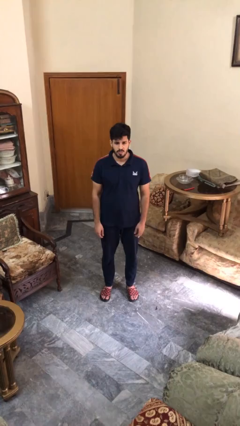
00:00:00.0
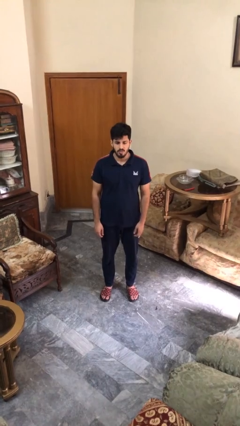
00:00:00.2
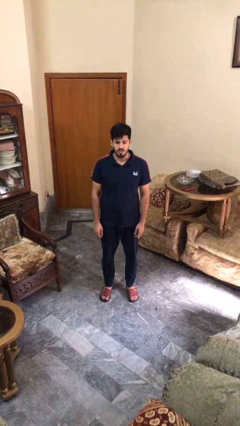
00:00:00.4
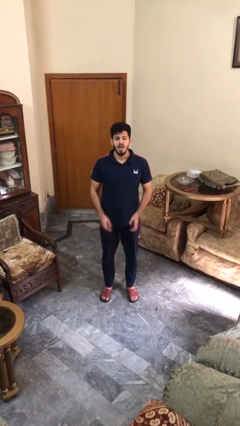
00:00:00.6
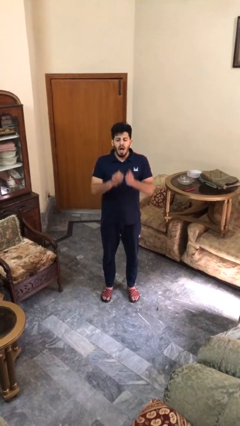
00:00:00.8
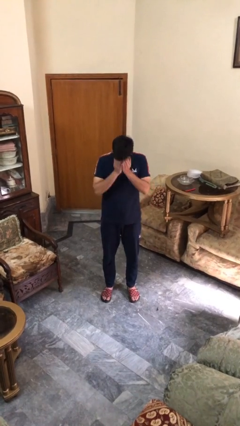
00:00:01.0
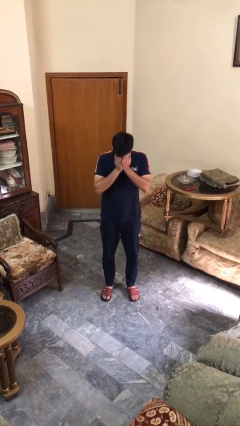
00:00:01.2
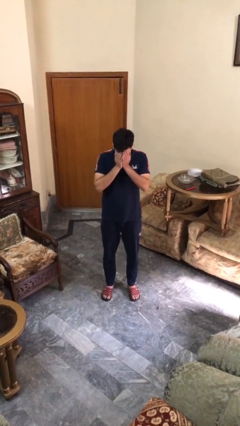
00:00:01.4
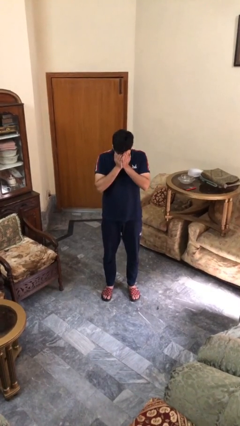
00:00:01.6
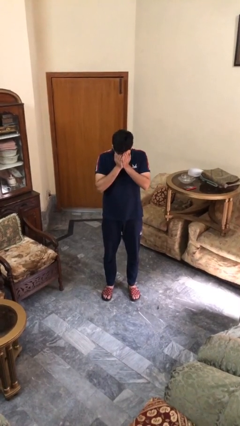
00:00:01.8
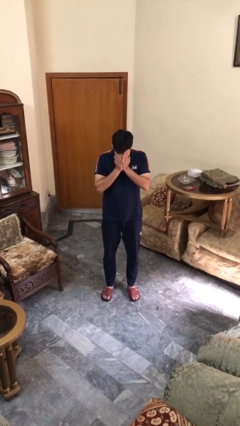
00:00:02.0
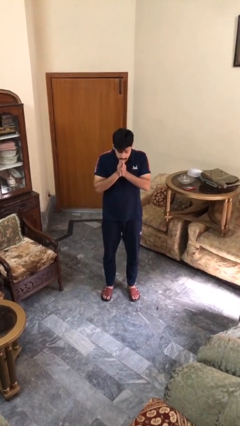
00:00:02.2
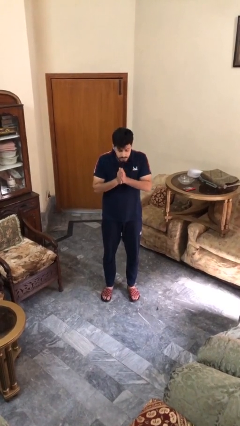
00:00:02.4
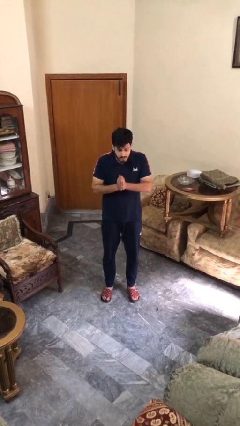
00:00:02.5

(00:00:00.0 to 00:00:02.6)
person sneezes into hand

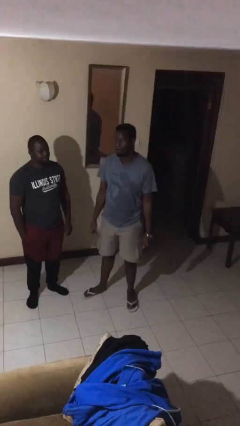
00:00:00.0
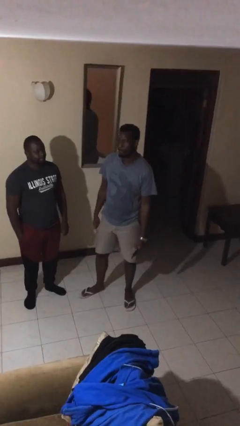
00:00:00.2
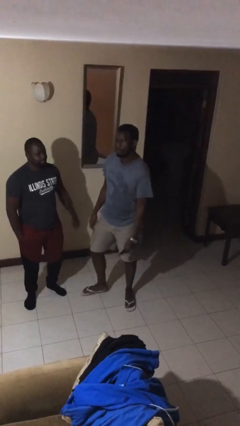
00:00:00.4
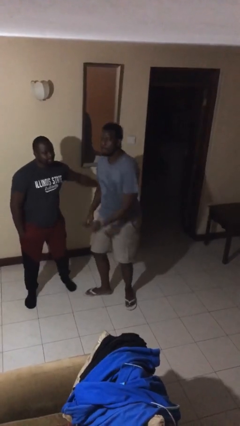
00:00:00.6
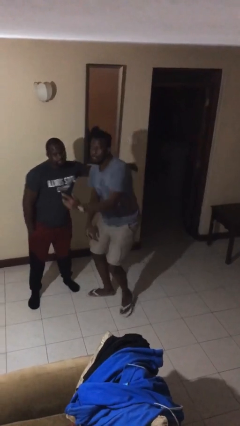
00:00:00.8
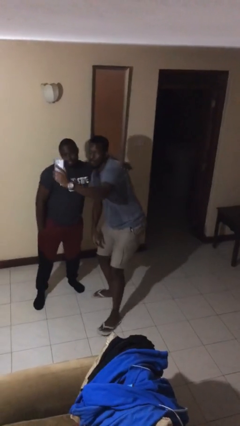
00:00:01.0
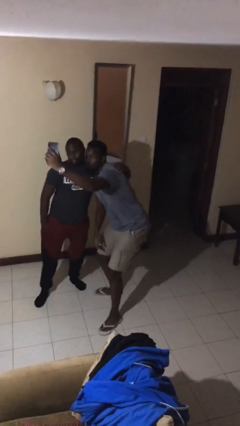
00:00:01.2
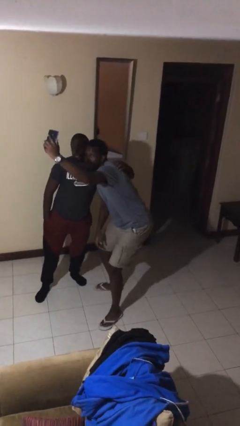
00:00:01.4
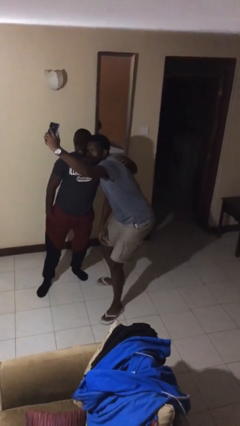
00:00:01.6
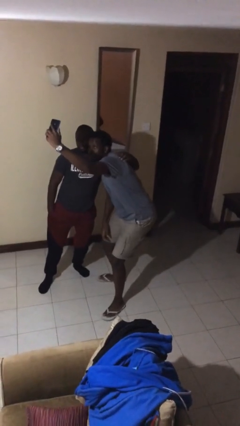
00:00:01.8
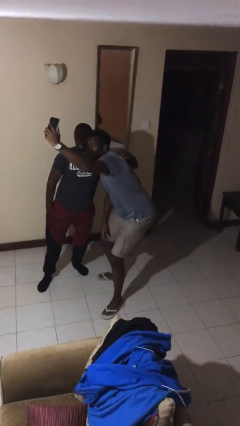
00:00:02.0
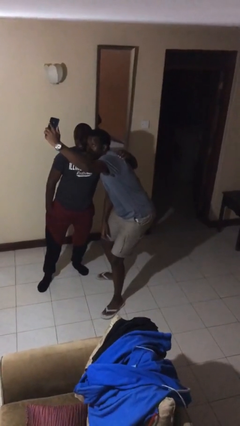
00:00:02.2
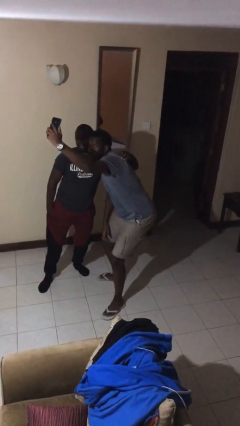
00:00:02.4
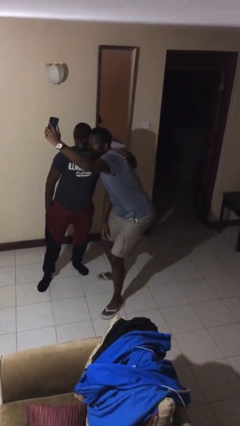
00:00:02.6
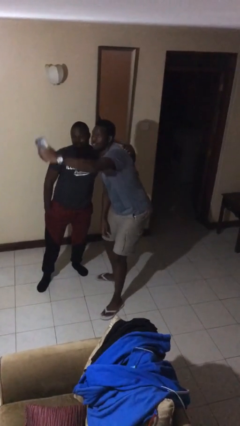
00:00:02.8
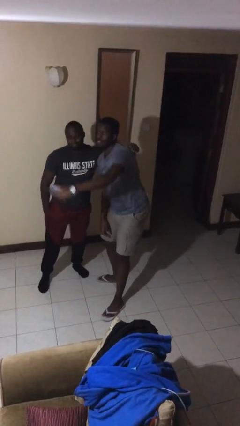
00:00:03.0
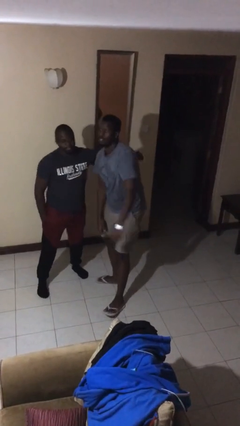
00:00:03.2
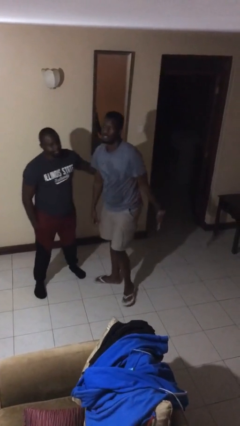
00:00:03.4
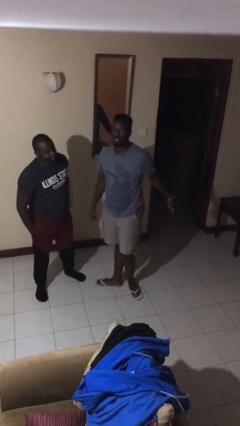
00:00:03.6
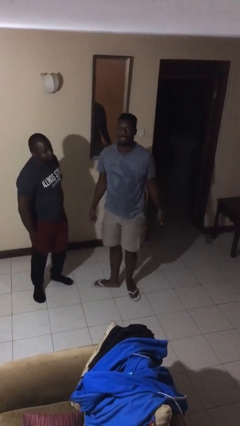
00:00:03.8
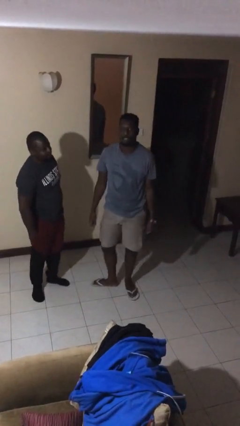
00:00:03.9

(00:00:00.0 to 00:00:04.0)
person takes selfie with person

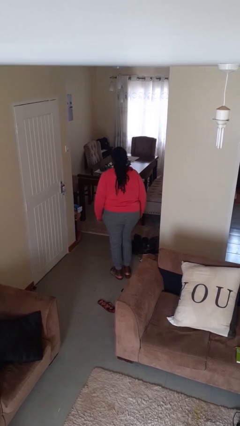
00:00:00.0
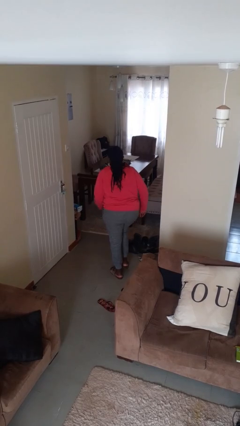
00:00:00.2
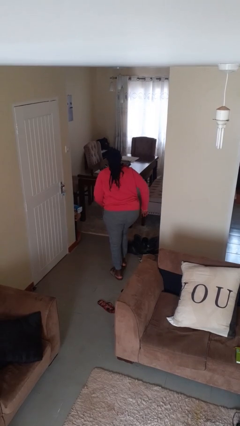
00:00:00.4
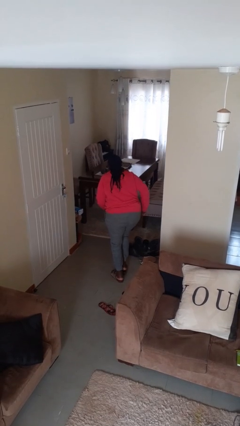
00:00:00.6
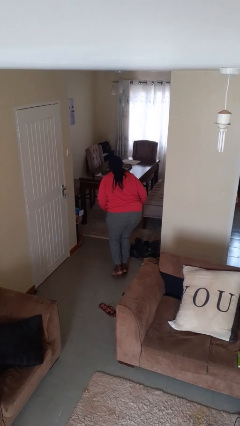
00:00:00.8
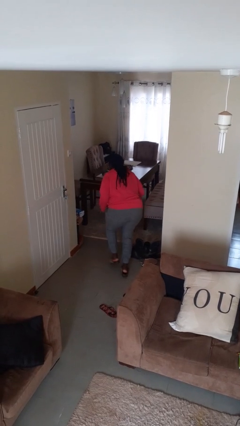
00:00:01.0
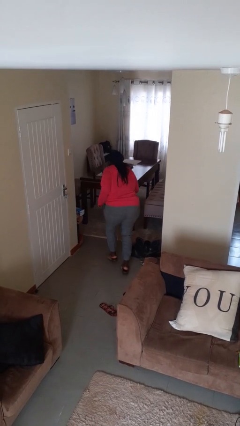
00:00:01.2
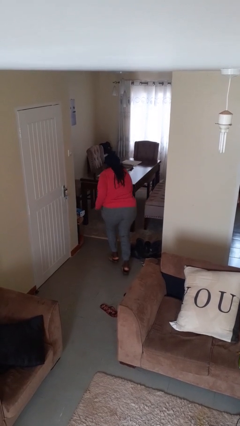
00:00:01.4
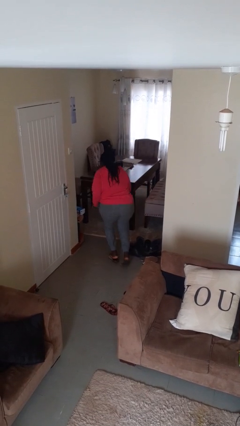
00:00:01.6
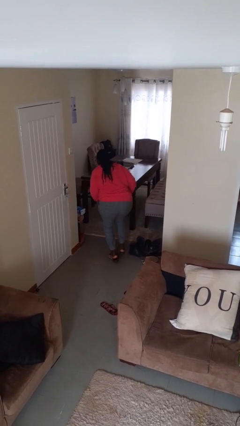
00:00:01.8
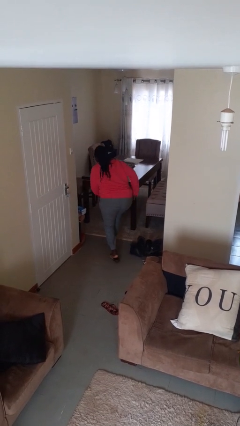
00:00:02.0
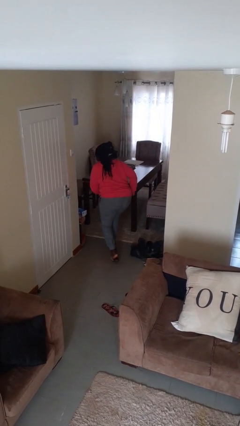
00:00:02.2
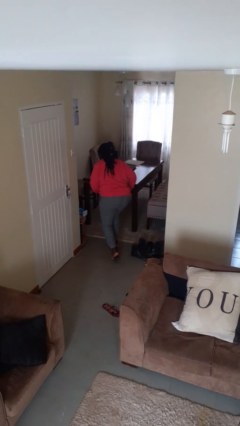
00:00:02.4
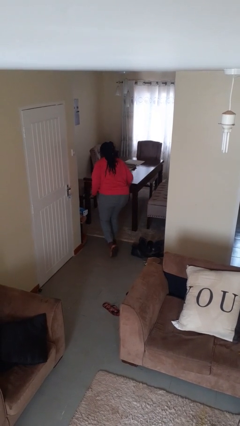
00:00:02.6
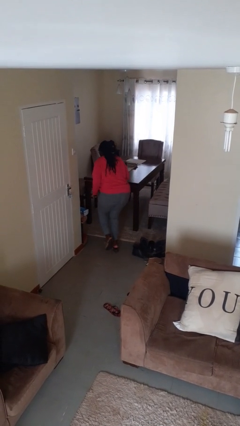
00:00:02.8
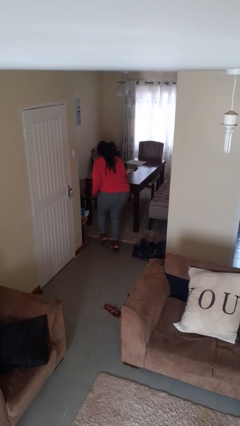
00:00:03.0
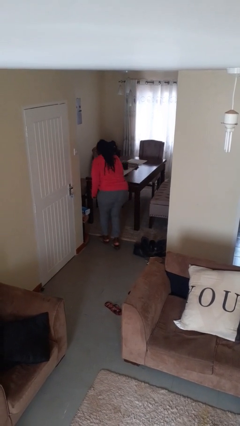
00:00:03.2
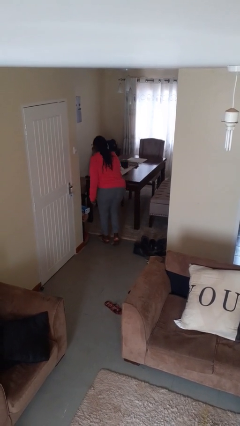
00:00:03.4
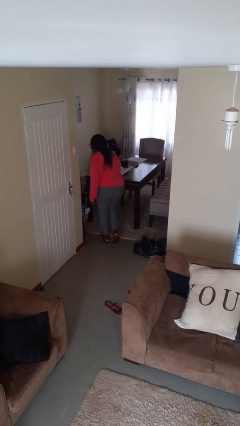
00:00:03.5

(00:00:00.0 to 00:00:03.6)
person walks tiptoe

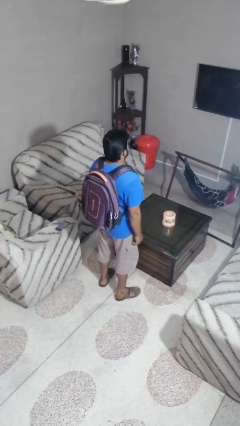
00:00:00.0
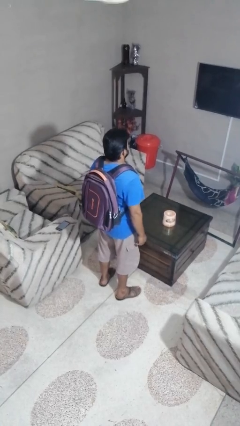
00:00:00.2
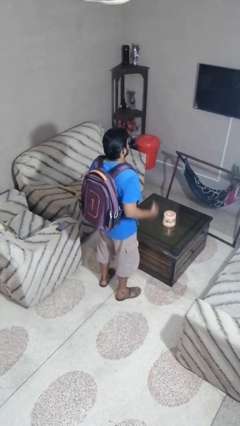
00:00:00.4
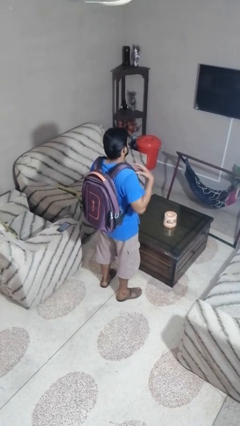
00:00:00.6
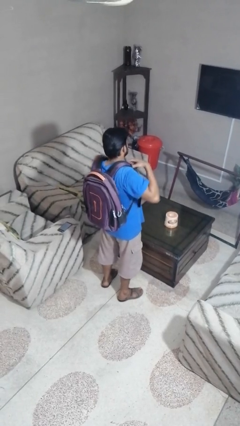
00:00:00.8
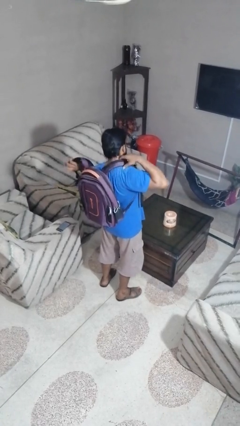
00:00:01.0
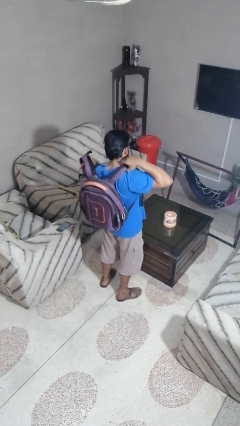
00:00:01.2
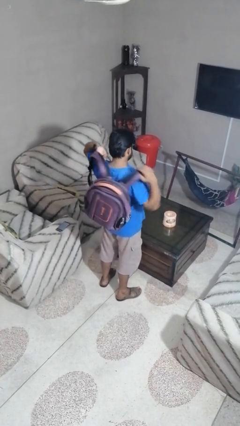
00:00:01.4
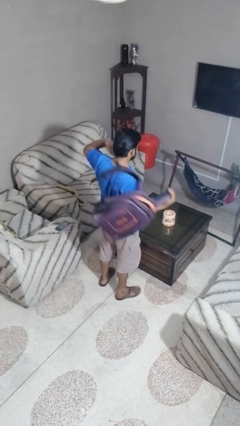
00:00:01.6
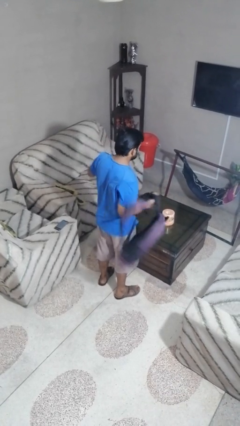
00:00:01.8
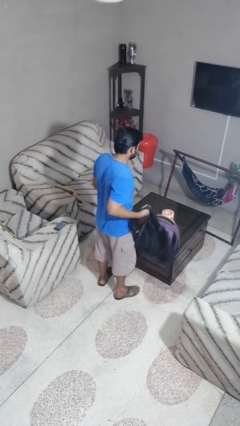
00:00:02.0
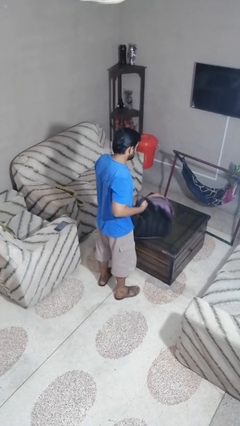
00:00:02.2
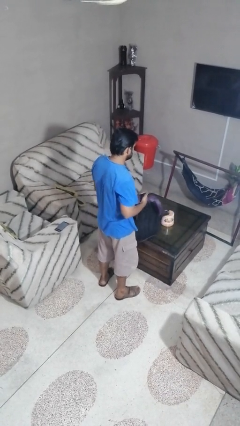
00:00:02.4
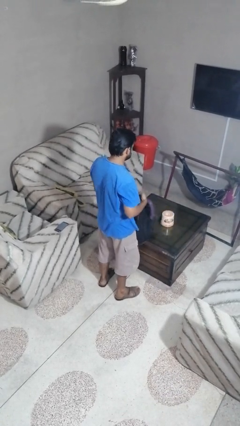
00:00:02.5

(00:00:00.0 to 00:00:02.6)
person takes off backpack

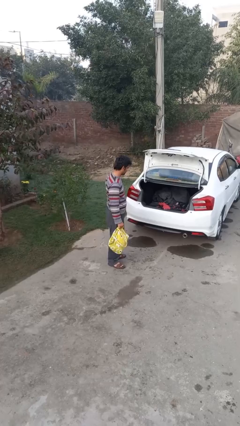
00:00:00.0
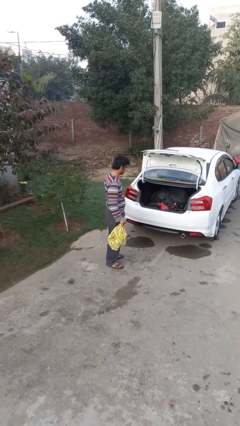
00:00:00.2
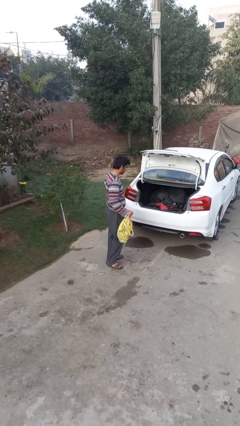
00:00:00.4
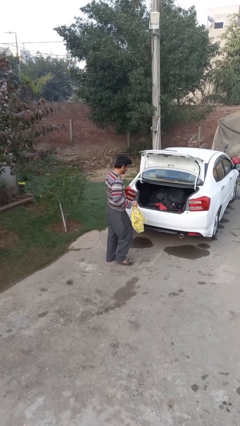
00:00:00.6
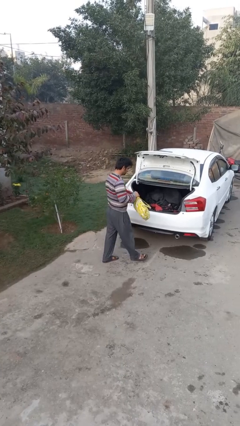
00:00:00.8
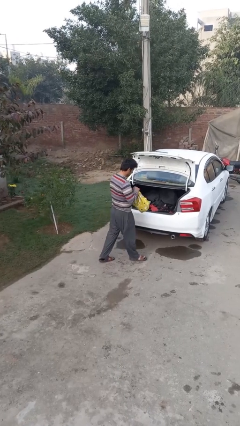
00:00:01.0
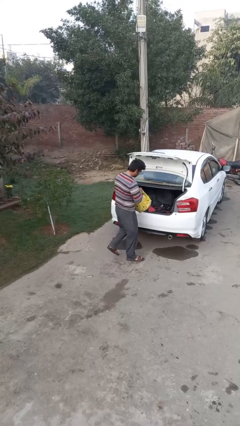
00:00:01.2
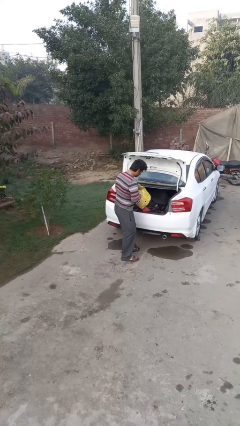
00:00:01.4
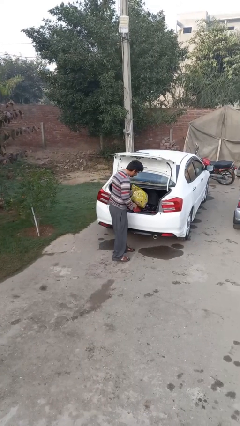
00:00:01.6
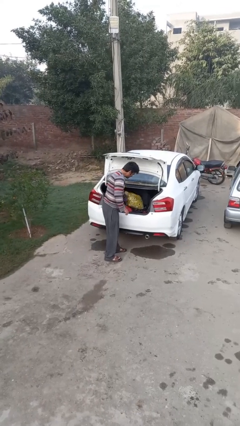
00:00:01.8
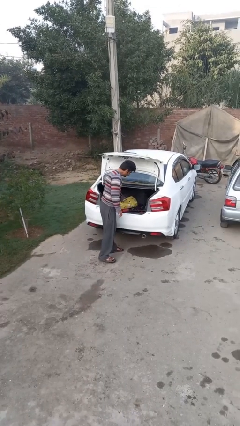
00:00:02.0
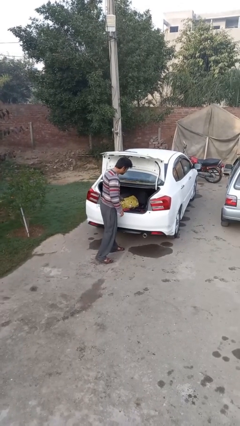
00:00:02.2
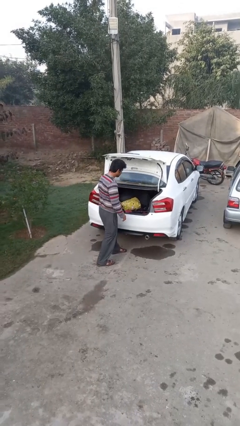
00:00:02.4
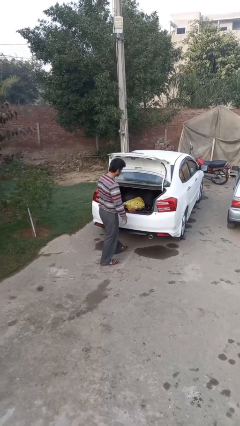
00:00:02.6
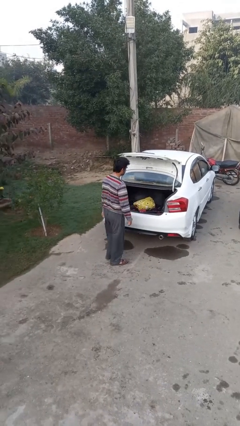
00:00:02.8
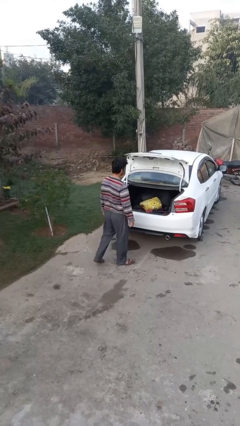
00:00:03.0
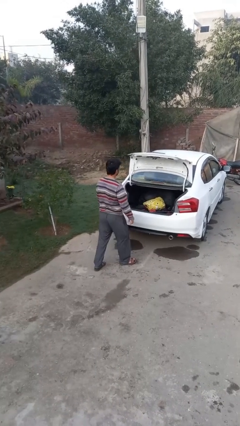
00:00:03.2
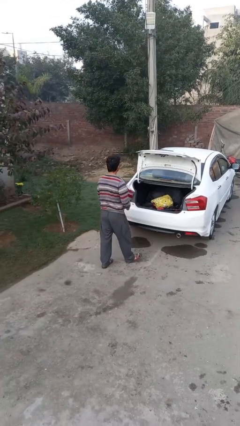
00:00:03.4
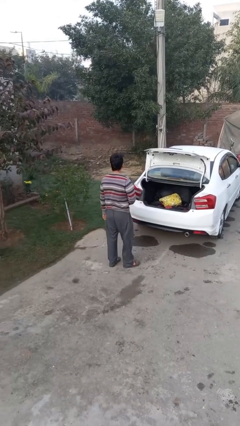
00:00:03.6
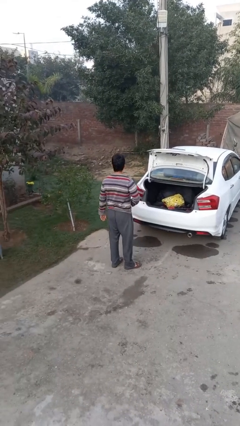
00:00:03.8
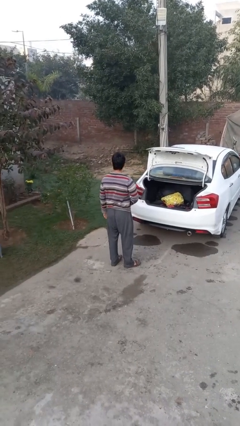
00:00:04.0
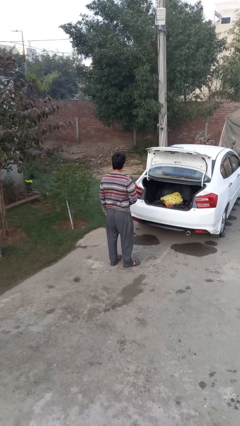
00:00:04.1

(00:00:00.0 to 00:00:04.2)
person loads car

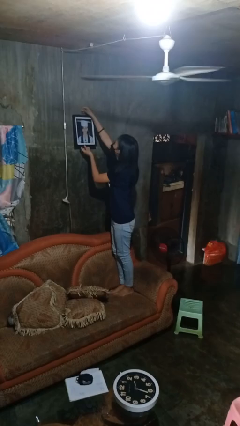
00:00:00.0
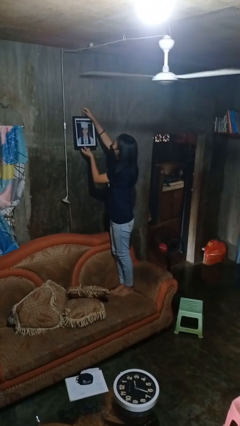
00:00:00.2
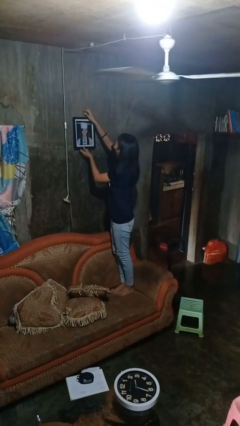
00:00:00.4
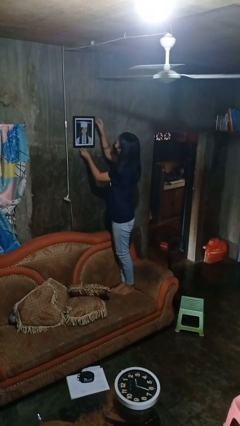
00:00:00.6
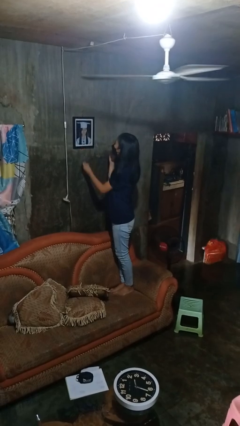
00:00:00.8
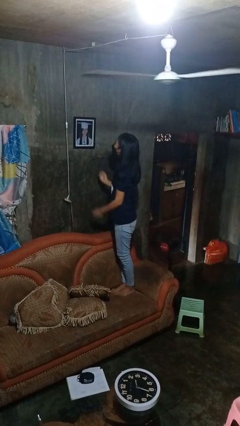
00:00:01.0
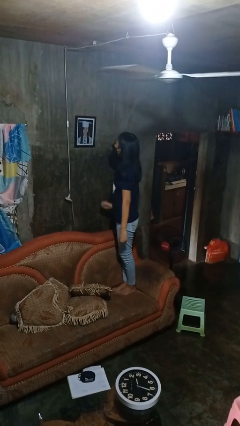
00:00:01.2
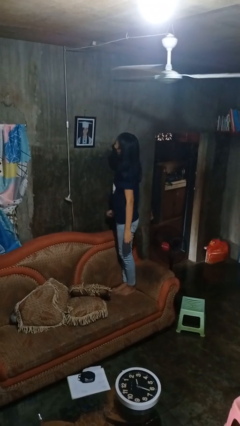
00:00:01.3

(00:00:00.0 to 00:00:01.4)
person puts up picture frame